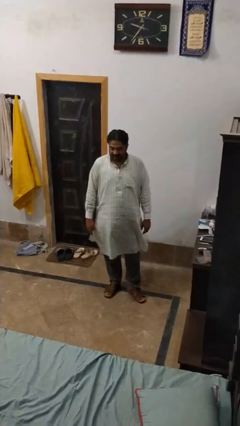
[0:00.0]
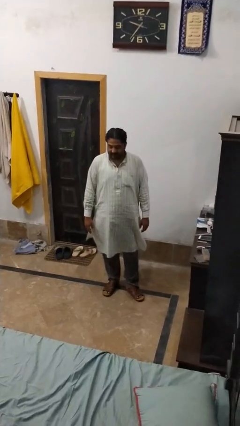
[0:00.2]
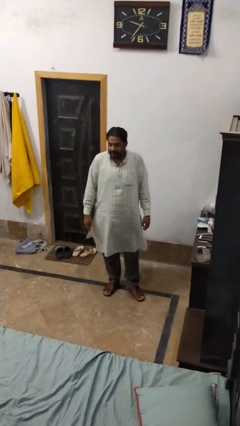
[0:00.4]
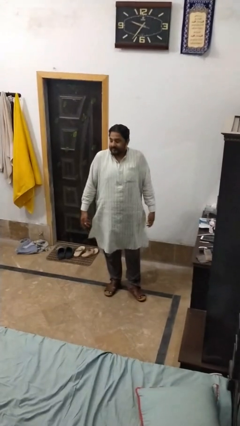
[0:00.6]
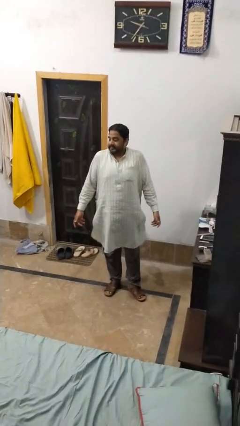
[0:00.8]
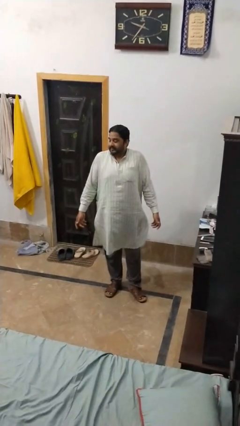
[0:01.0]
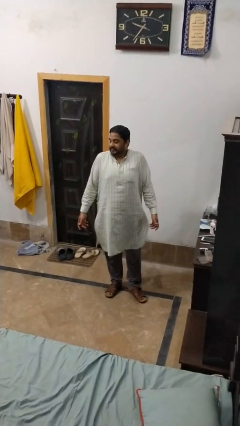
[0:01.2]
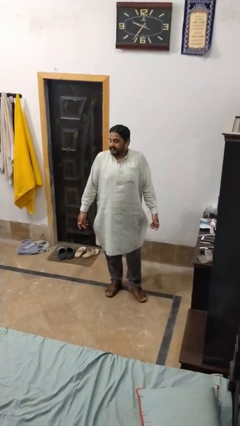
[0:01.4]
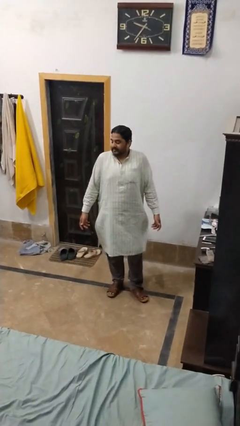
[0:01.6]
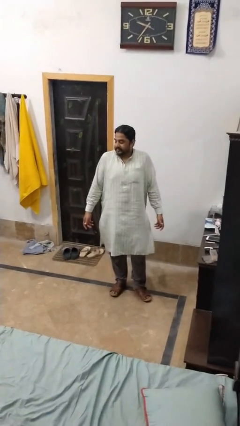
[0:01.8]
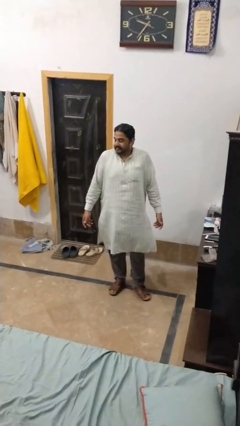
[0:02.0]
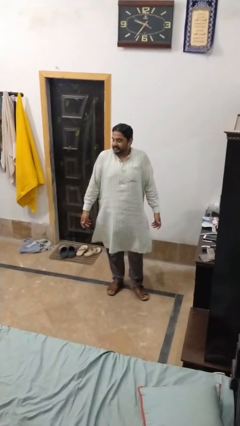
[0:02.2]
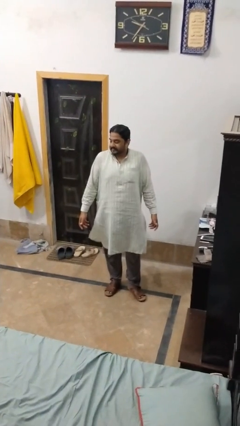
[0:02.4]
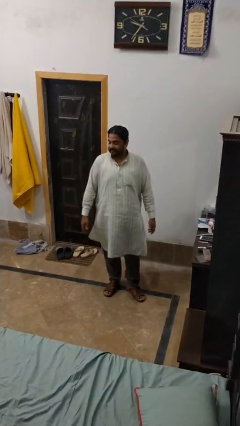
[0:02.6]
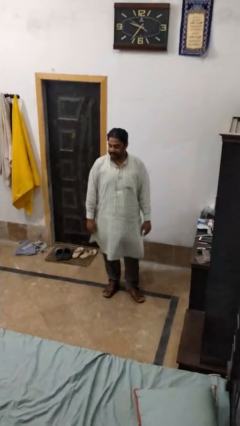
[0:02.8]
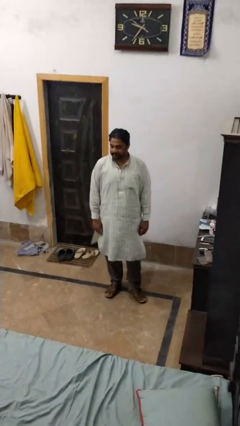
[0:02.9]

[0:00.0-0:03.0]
person shrugs

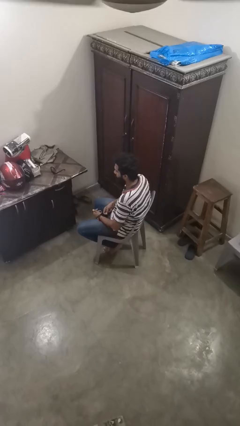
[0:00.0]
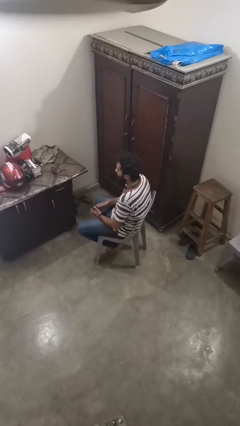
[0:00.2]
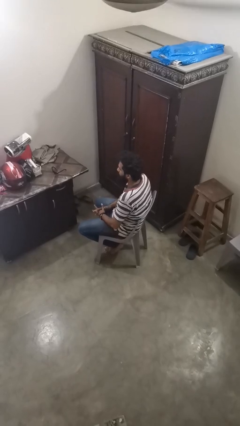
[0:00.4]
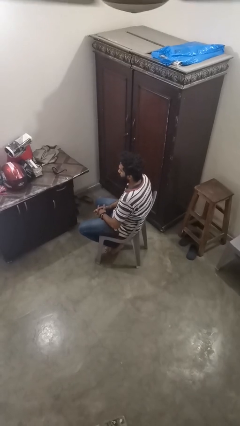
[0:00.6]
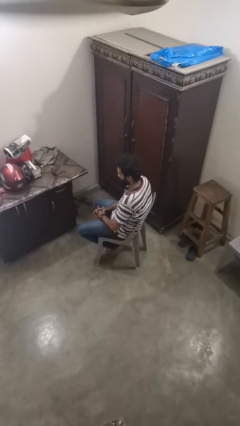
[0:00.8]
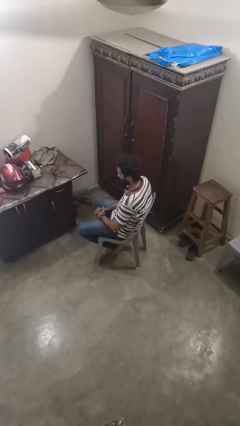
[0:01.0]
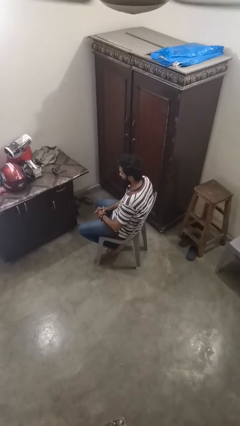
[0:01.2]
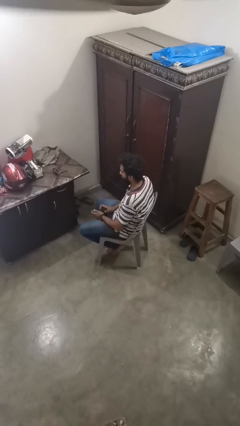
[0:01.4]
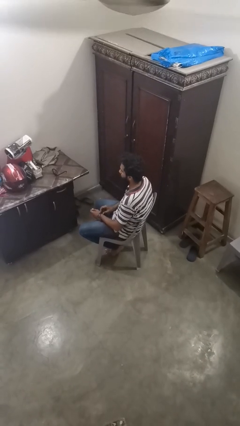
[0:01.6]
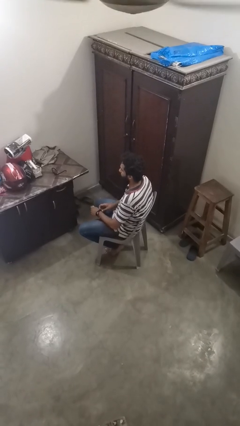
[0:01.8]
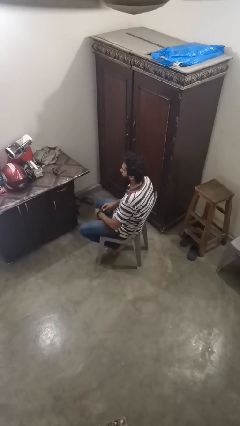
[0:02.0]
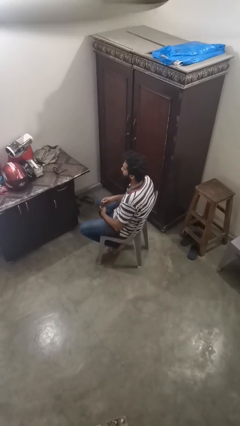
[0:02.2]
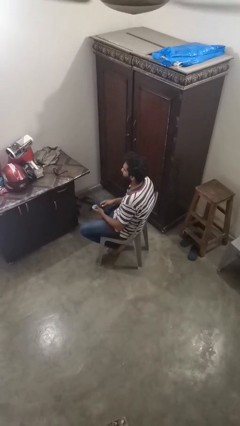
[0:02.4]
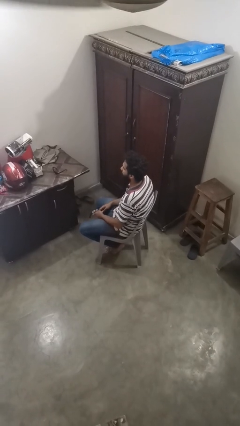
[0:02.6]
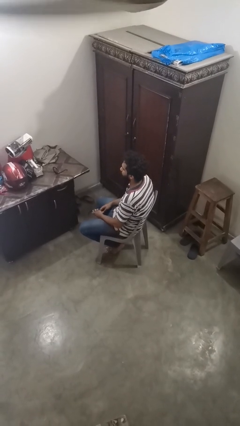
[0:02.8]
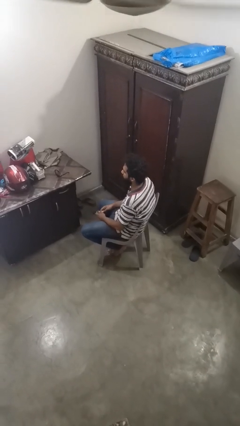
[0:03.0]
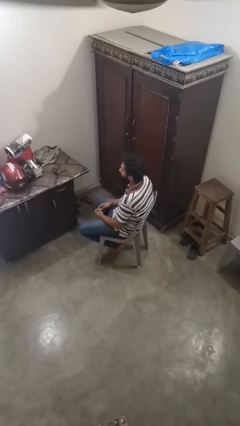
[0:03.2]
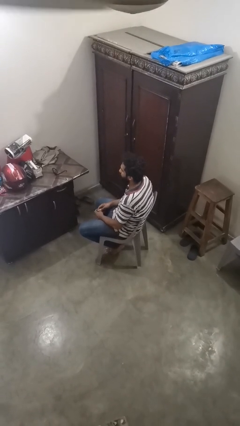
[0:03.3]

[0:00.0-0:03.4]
person takes off wristwatch

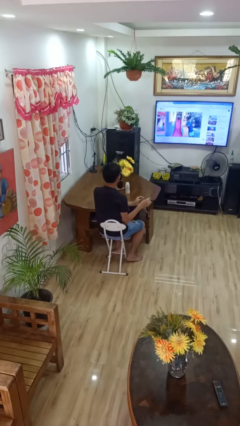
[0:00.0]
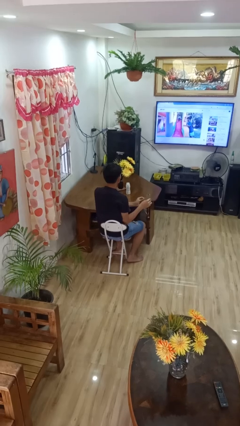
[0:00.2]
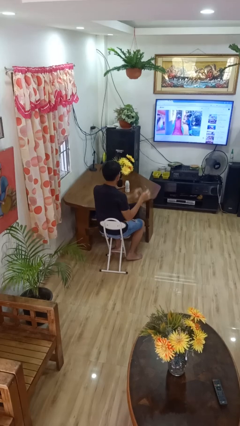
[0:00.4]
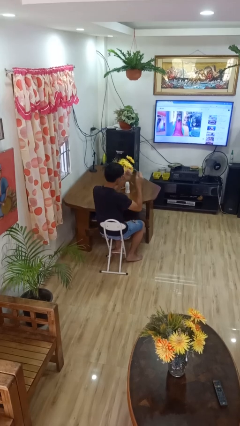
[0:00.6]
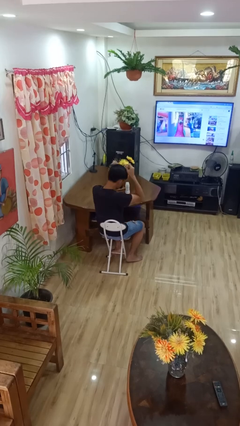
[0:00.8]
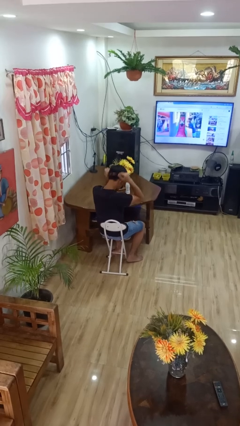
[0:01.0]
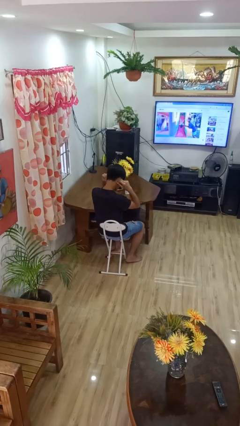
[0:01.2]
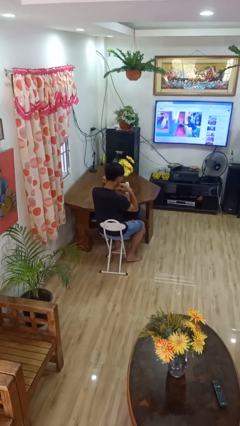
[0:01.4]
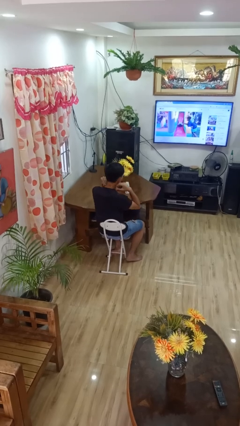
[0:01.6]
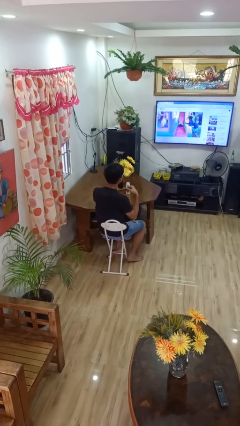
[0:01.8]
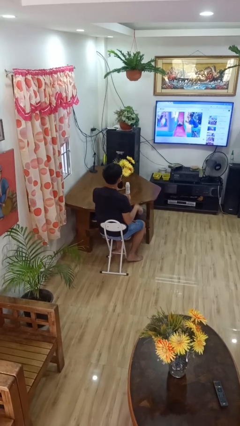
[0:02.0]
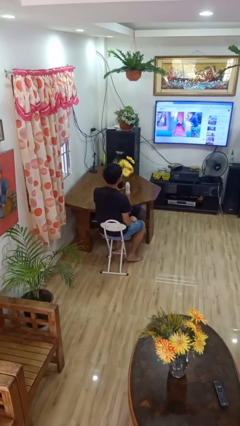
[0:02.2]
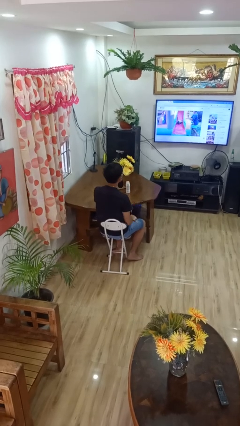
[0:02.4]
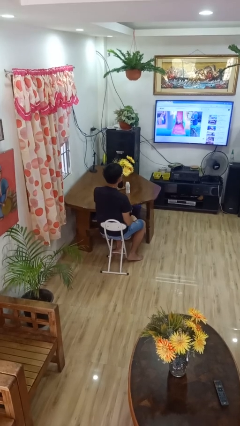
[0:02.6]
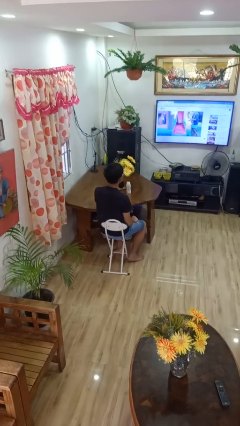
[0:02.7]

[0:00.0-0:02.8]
person puts on necklace

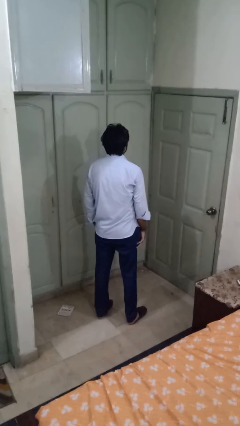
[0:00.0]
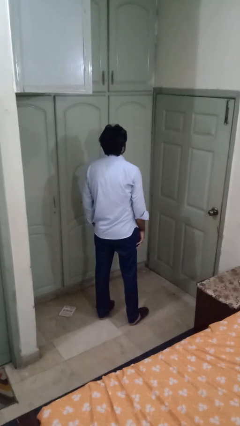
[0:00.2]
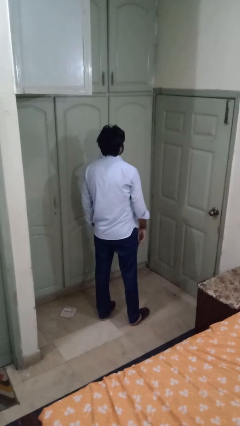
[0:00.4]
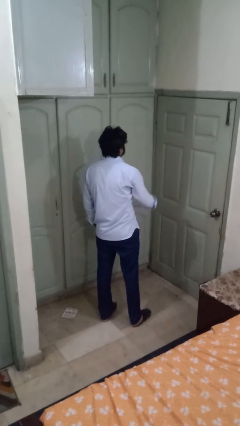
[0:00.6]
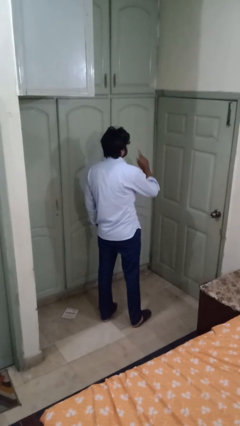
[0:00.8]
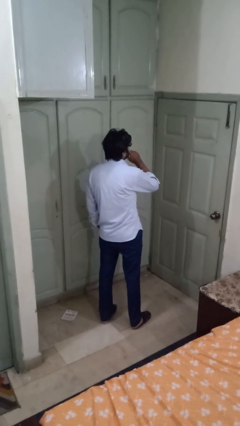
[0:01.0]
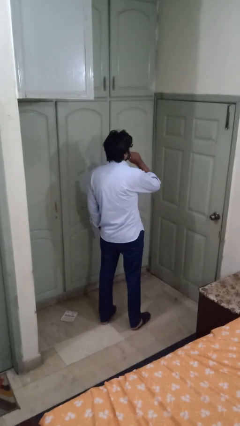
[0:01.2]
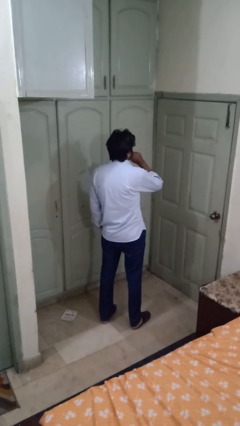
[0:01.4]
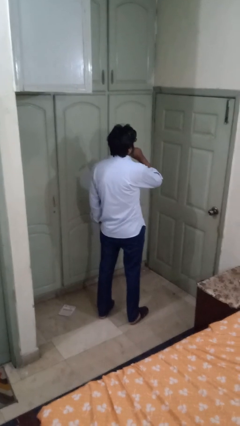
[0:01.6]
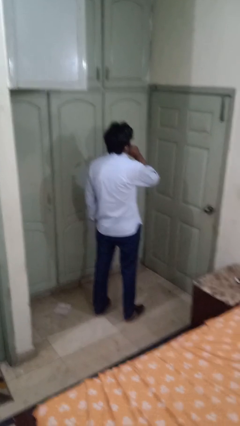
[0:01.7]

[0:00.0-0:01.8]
person gestures be quiet

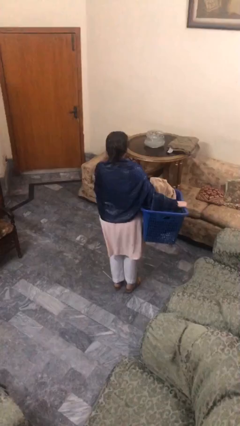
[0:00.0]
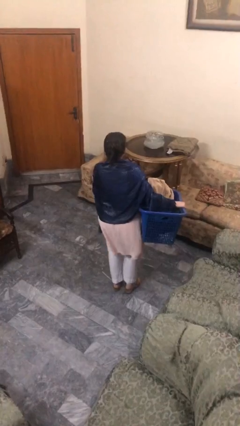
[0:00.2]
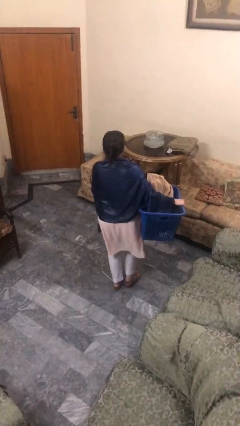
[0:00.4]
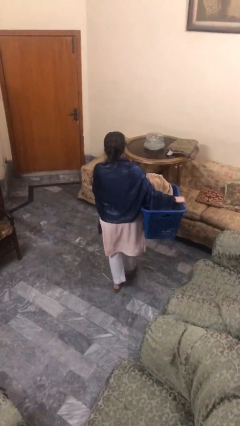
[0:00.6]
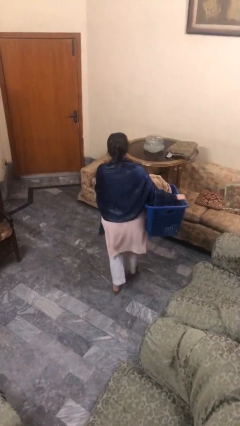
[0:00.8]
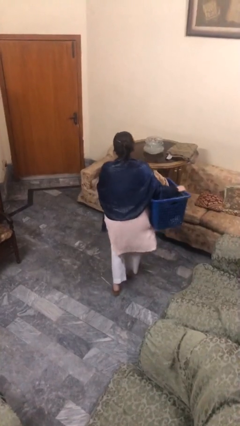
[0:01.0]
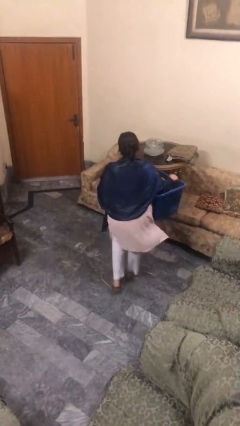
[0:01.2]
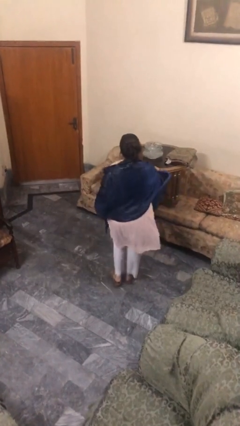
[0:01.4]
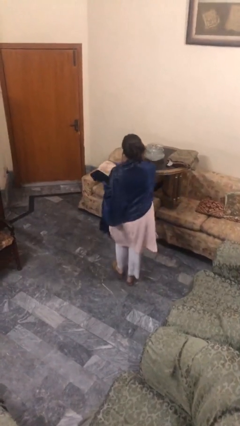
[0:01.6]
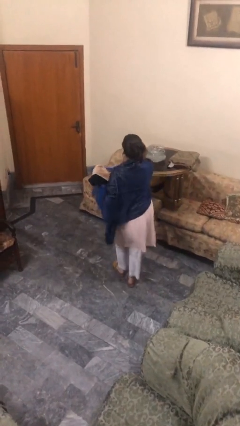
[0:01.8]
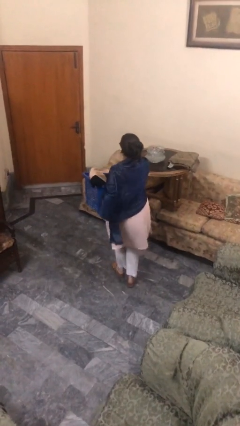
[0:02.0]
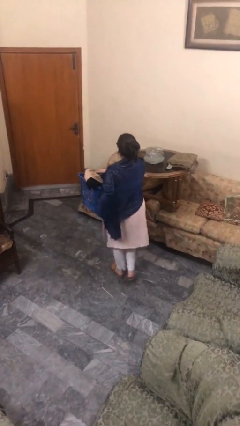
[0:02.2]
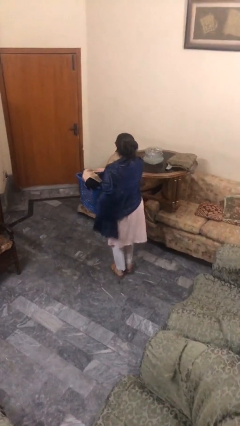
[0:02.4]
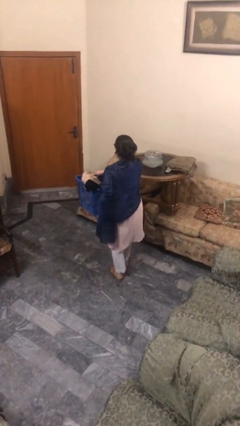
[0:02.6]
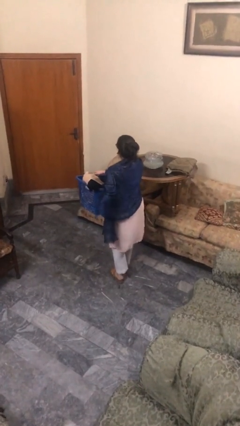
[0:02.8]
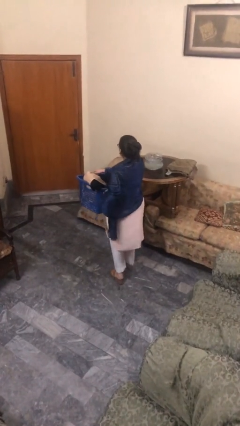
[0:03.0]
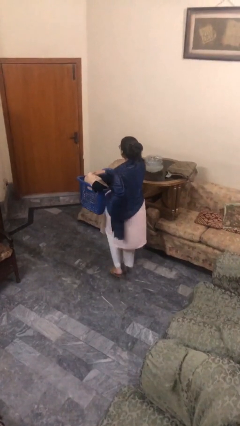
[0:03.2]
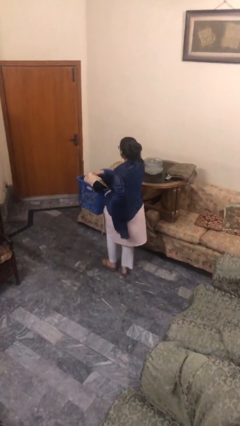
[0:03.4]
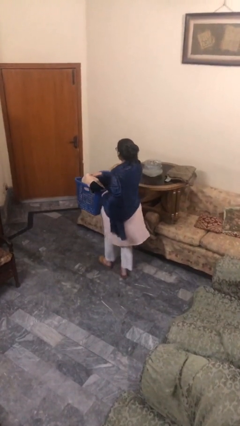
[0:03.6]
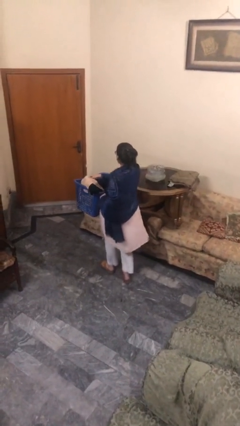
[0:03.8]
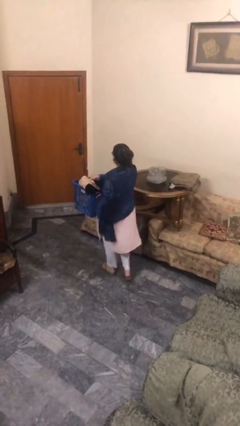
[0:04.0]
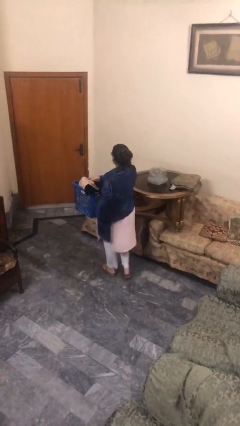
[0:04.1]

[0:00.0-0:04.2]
person carries laundry basket

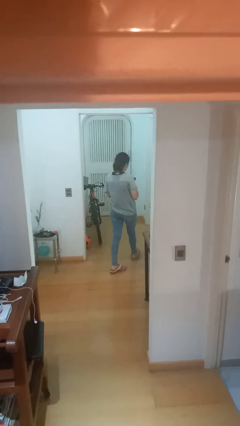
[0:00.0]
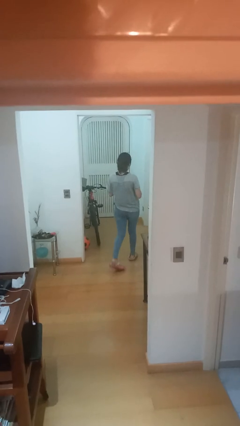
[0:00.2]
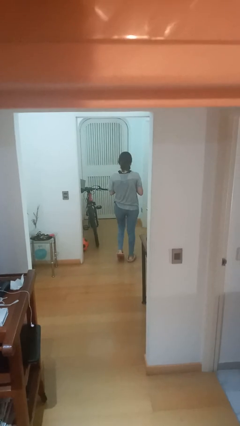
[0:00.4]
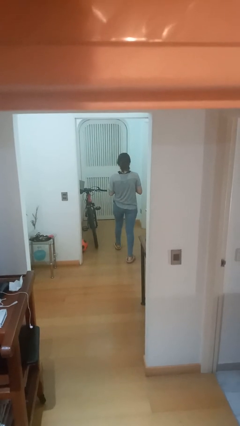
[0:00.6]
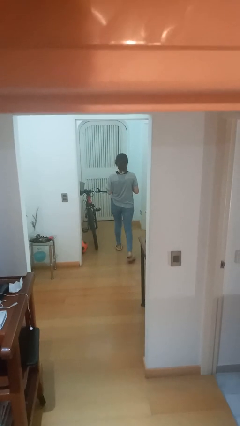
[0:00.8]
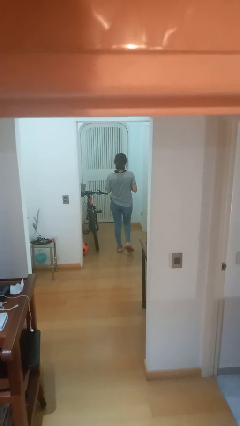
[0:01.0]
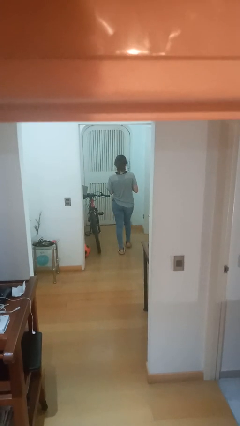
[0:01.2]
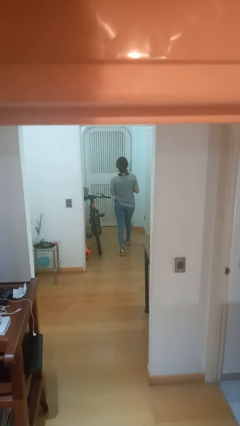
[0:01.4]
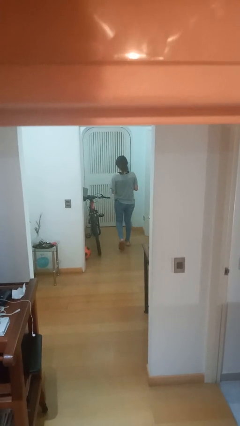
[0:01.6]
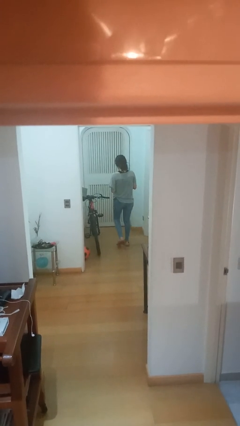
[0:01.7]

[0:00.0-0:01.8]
person exits scene through structure

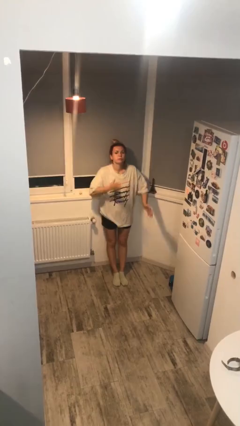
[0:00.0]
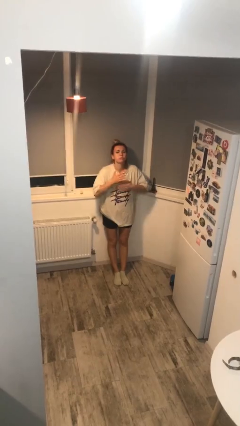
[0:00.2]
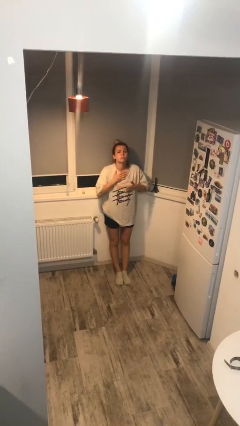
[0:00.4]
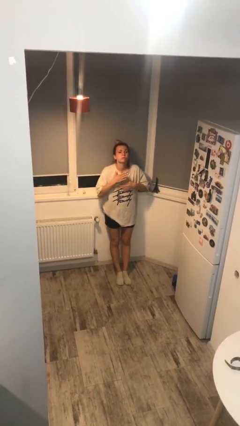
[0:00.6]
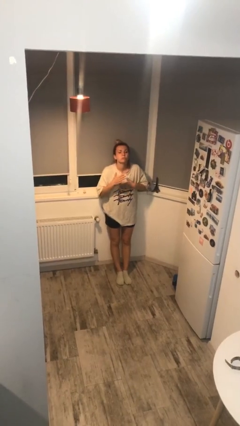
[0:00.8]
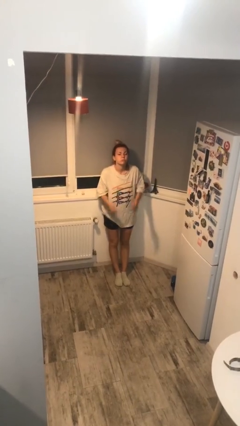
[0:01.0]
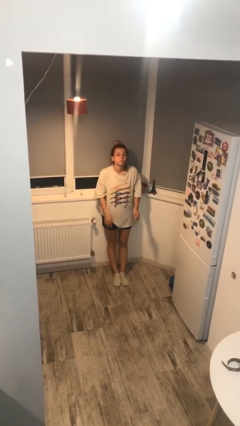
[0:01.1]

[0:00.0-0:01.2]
person drums on chest
